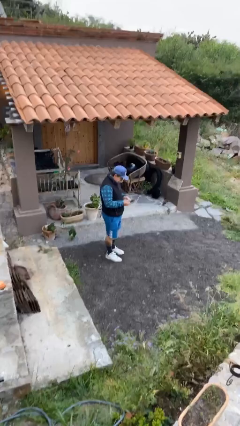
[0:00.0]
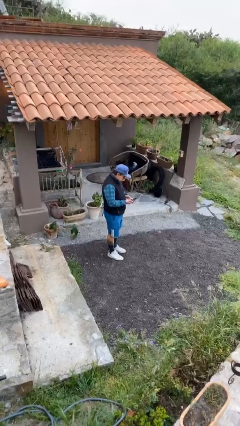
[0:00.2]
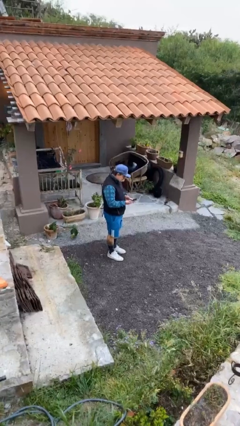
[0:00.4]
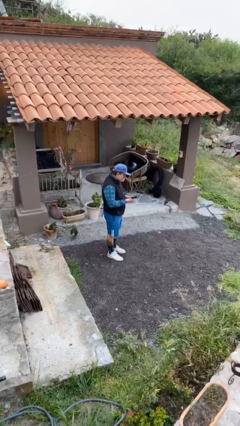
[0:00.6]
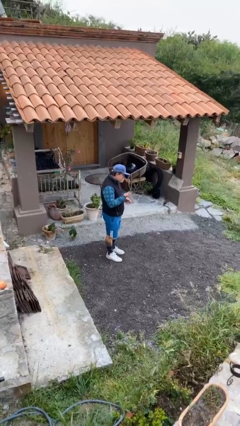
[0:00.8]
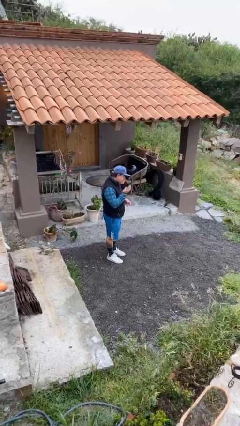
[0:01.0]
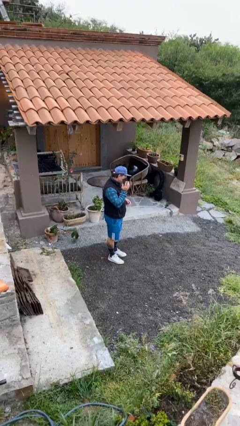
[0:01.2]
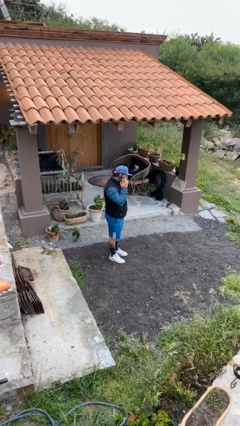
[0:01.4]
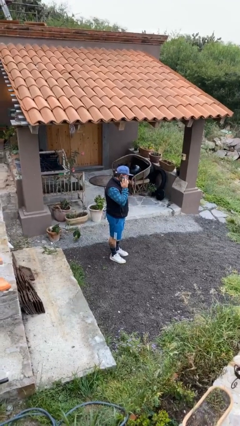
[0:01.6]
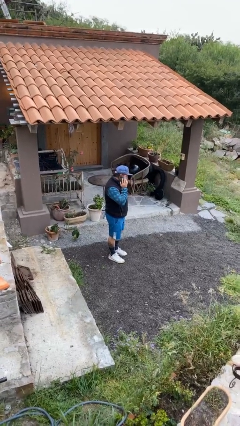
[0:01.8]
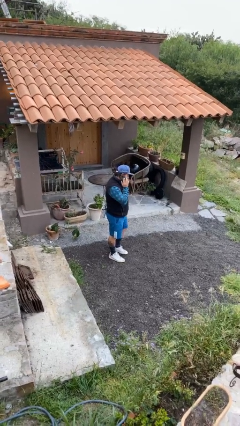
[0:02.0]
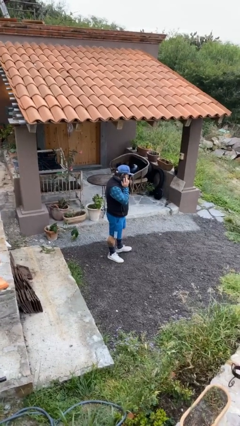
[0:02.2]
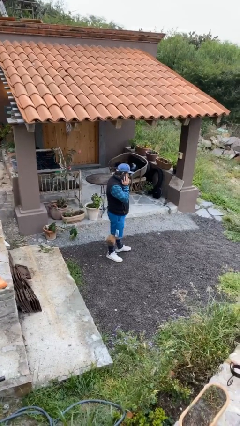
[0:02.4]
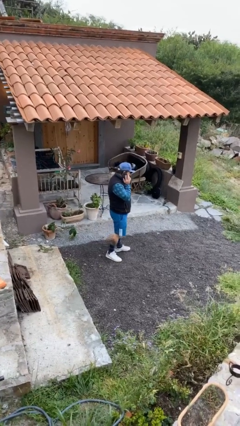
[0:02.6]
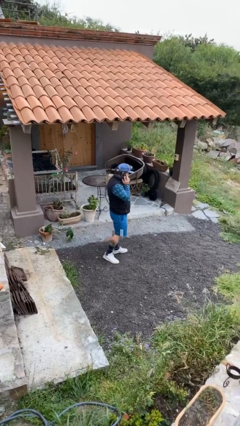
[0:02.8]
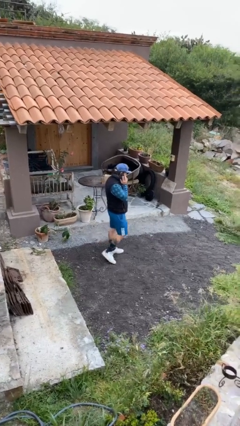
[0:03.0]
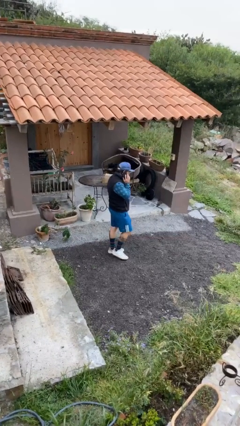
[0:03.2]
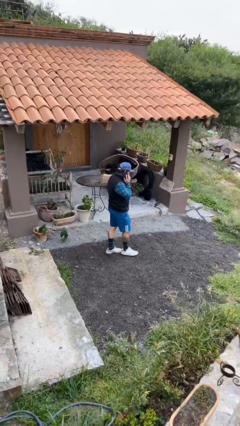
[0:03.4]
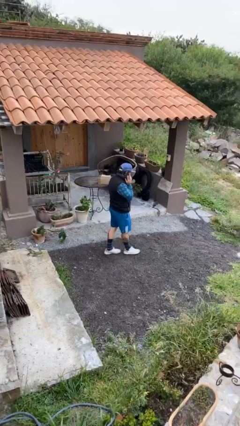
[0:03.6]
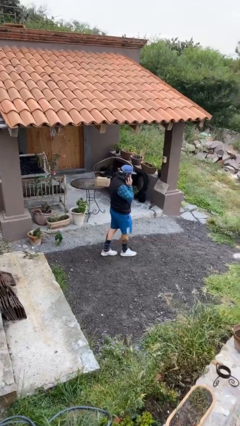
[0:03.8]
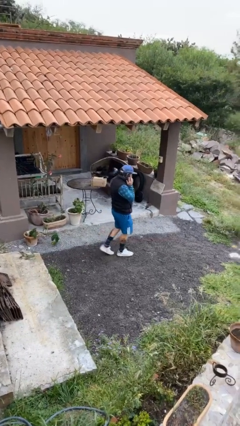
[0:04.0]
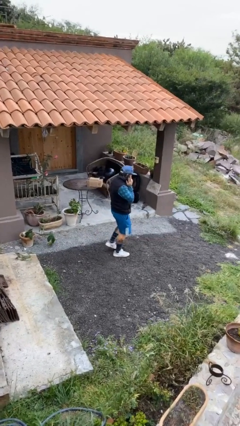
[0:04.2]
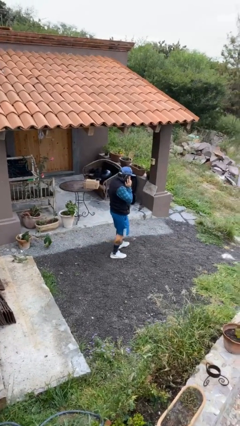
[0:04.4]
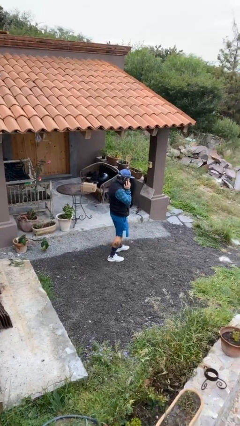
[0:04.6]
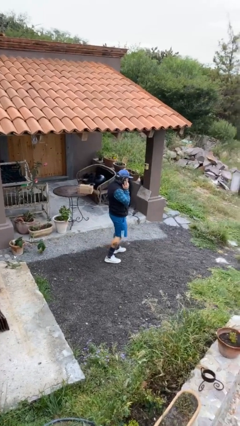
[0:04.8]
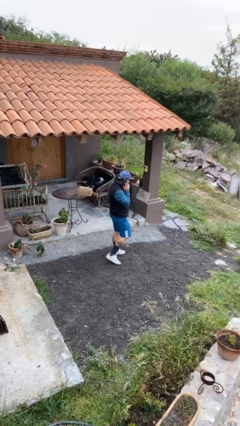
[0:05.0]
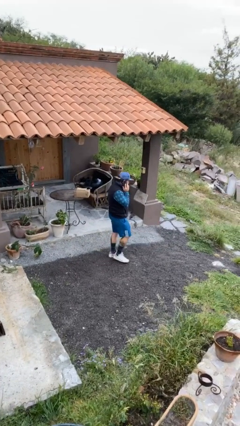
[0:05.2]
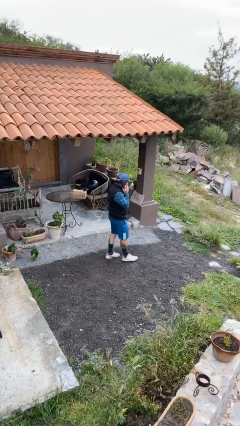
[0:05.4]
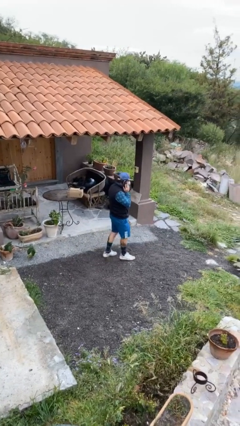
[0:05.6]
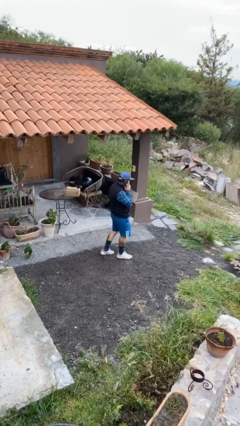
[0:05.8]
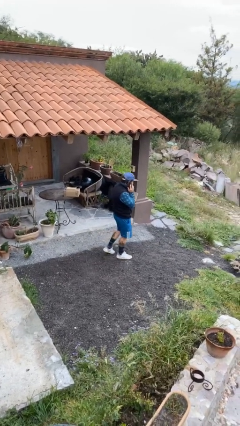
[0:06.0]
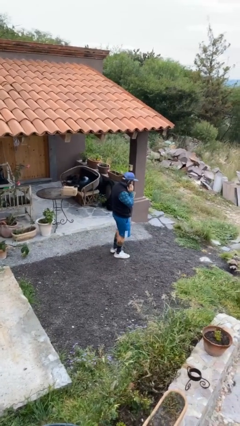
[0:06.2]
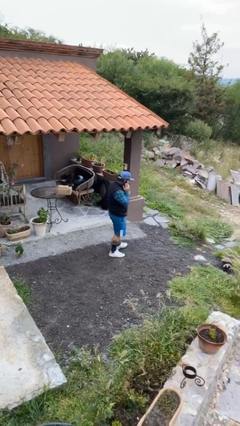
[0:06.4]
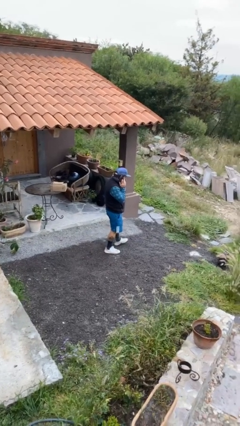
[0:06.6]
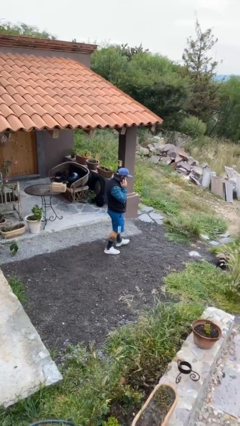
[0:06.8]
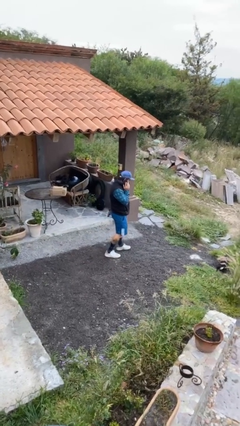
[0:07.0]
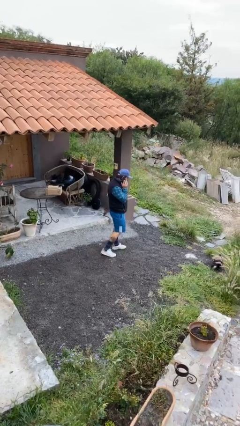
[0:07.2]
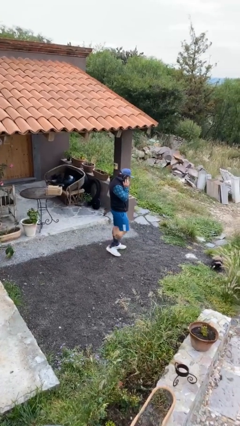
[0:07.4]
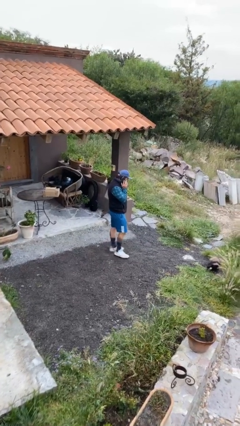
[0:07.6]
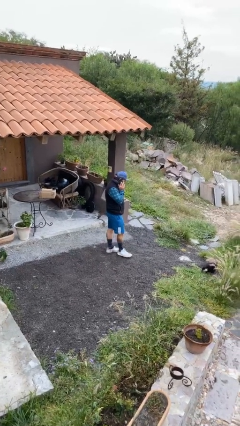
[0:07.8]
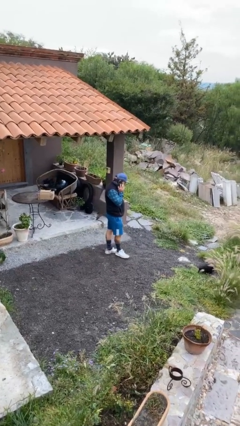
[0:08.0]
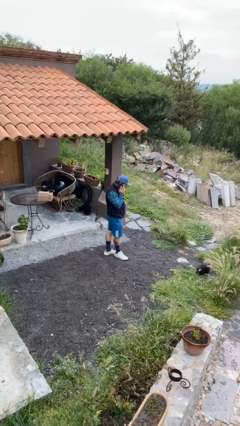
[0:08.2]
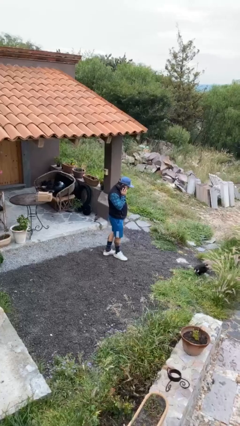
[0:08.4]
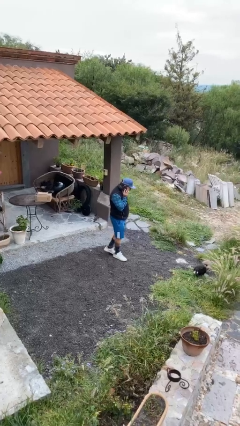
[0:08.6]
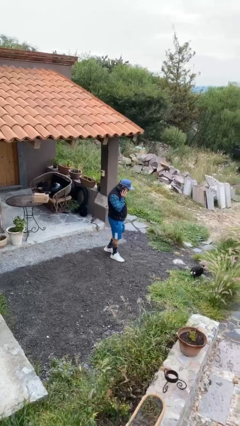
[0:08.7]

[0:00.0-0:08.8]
person talks on phone

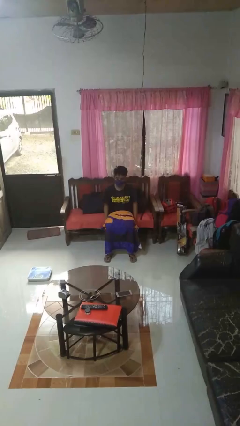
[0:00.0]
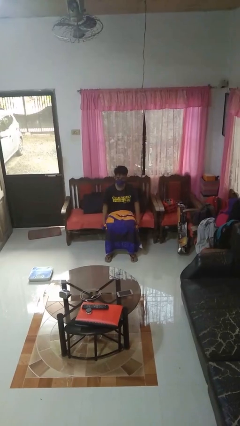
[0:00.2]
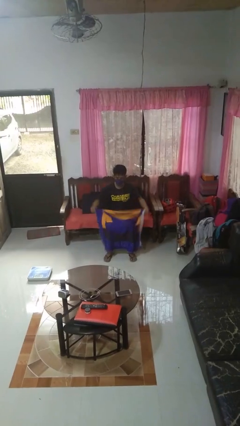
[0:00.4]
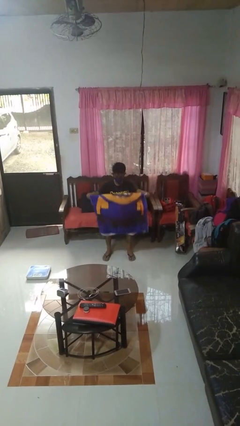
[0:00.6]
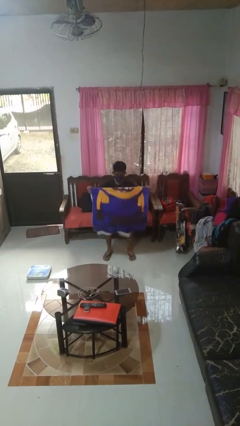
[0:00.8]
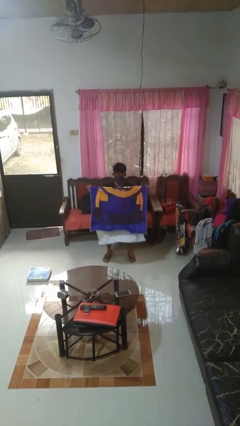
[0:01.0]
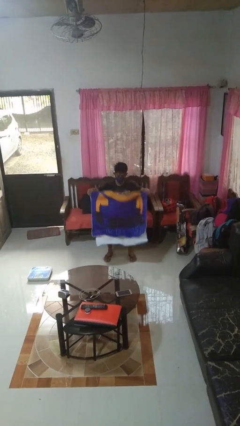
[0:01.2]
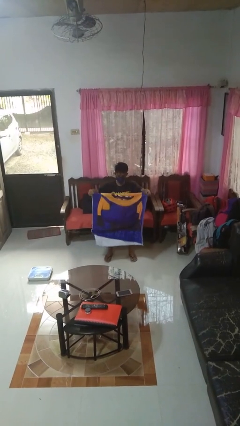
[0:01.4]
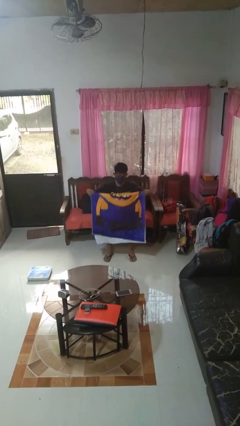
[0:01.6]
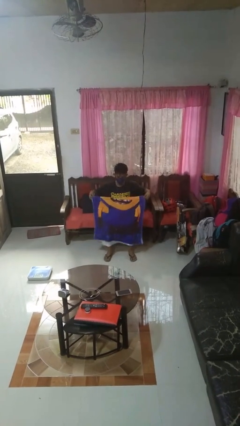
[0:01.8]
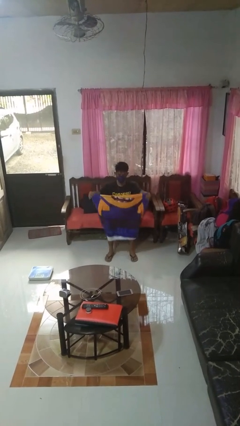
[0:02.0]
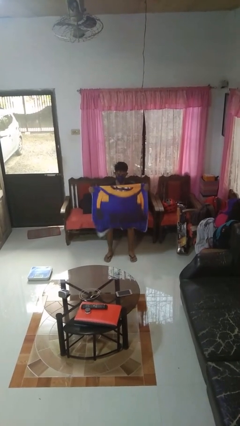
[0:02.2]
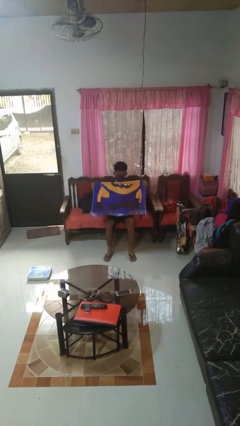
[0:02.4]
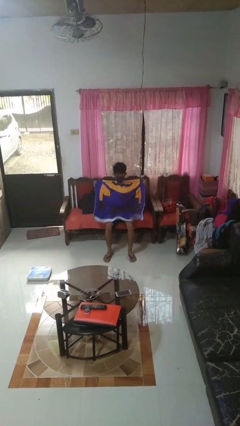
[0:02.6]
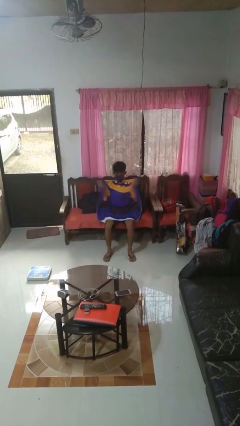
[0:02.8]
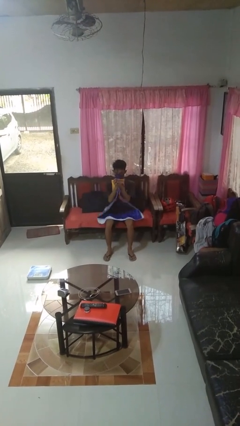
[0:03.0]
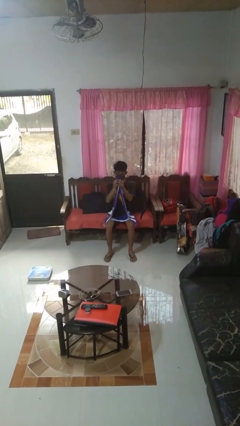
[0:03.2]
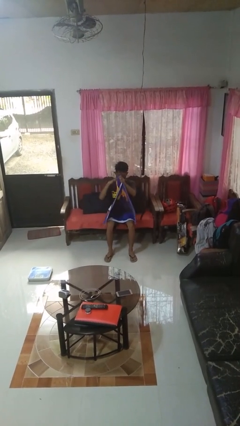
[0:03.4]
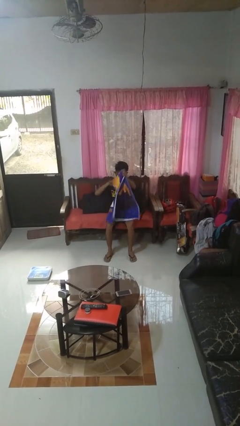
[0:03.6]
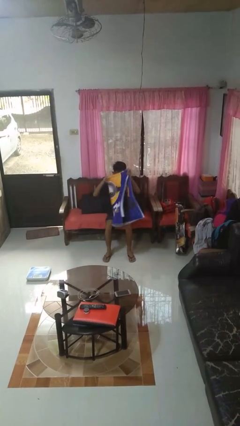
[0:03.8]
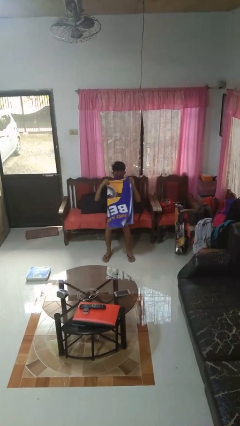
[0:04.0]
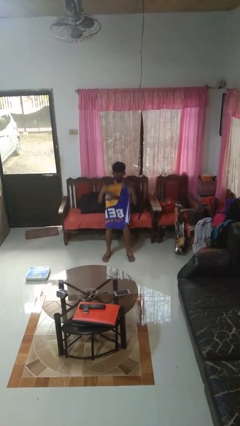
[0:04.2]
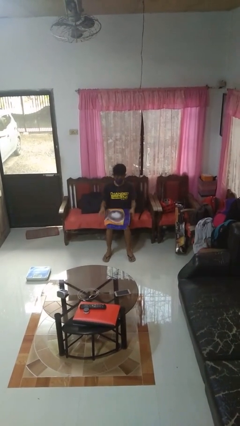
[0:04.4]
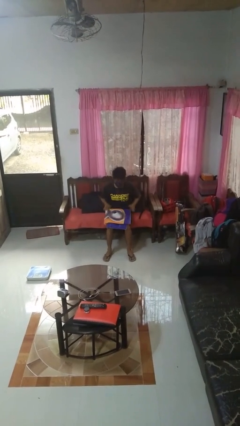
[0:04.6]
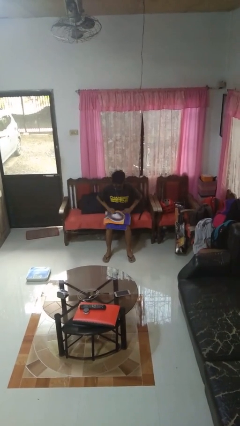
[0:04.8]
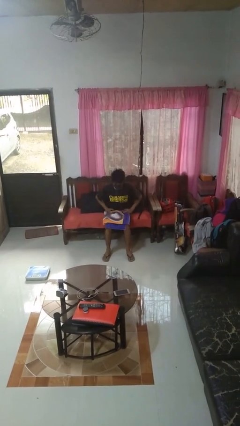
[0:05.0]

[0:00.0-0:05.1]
person folds towel

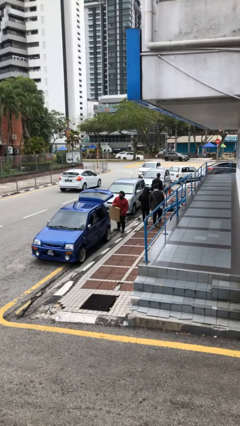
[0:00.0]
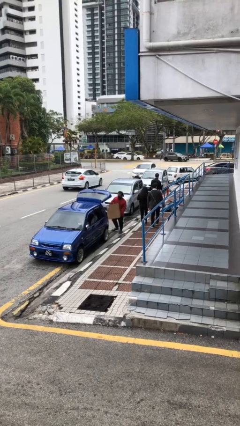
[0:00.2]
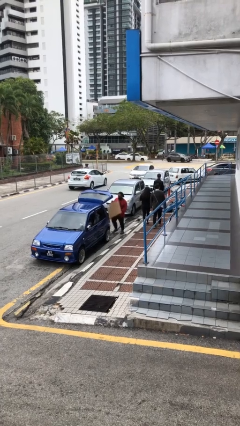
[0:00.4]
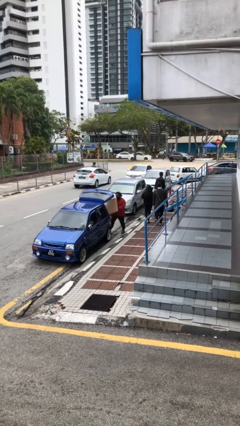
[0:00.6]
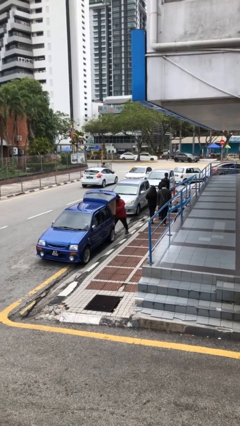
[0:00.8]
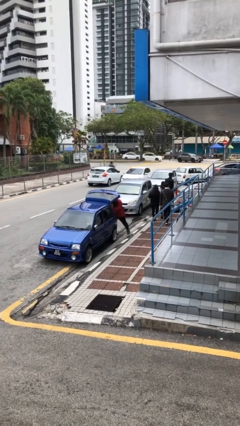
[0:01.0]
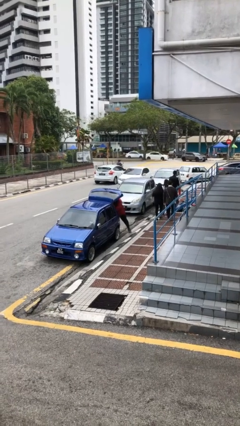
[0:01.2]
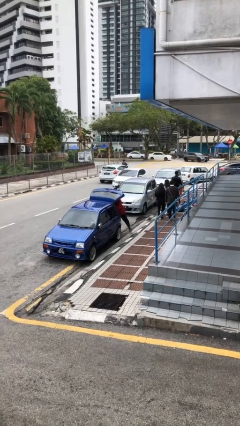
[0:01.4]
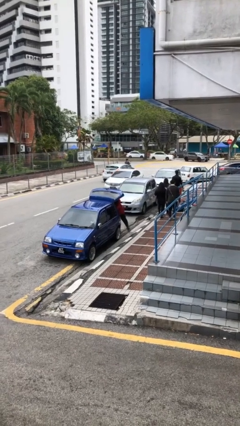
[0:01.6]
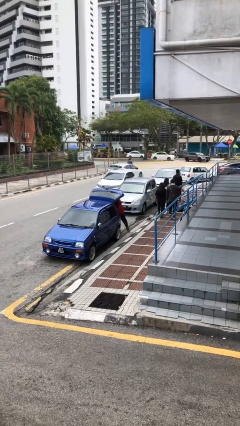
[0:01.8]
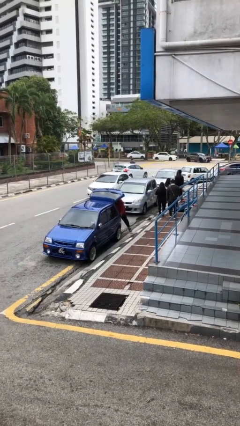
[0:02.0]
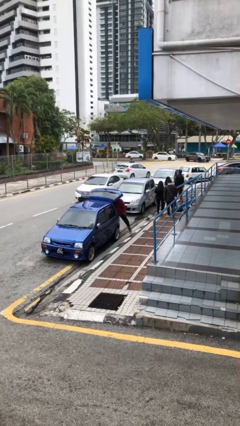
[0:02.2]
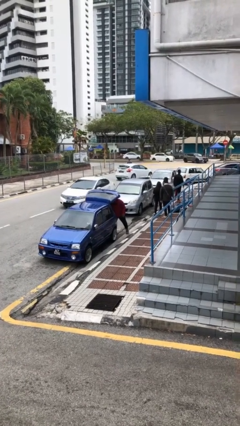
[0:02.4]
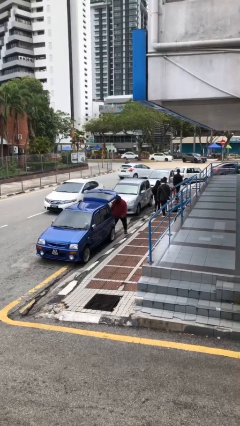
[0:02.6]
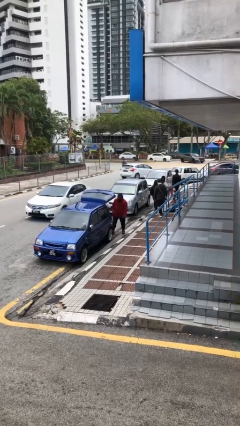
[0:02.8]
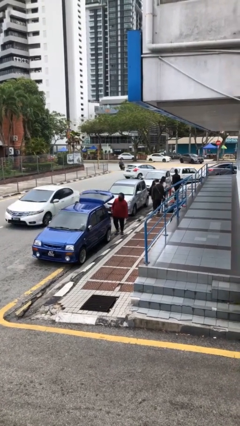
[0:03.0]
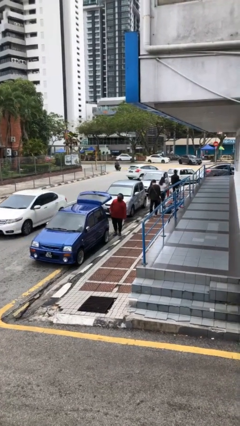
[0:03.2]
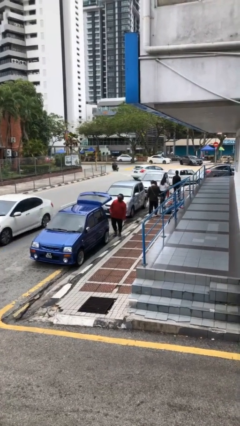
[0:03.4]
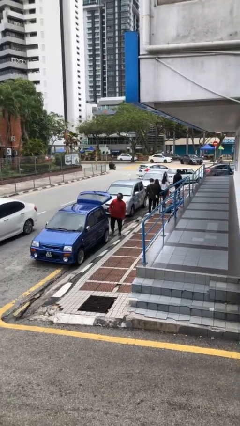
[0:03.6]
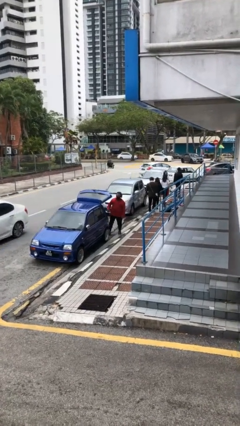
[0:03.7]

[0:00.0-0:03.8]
person loads car

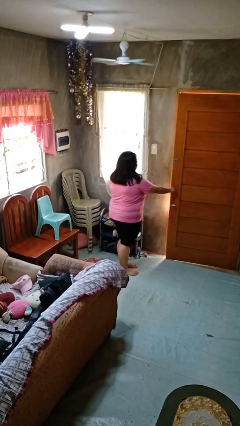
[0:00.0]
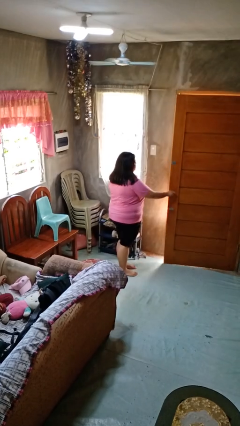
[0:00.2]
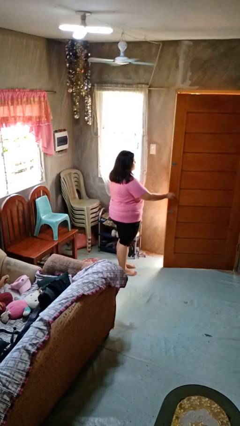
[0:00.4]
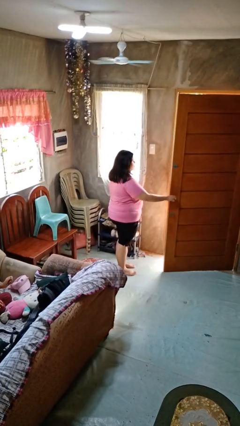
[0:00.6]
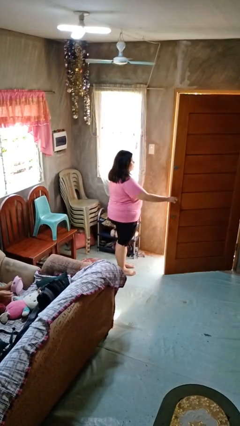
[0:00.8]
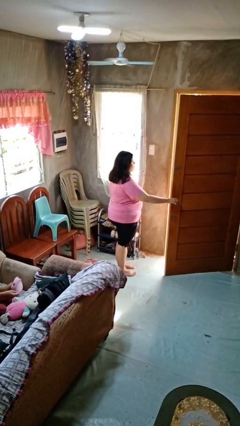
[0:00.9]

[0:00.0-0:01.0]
person opens facility door
